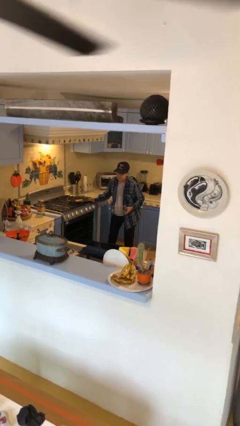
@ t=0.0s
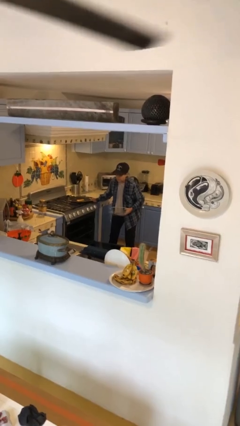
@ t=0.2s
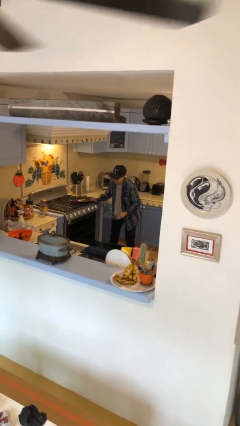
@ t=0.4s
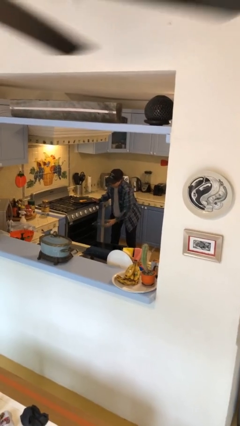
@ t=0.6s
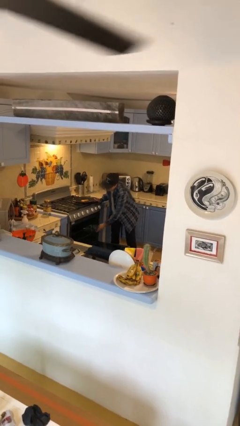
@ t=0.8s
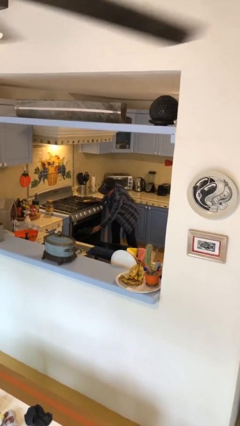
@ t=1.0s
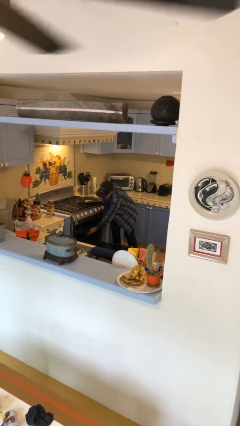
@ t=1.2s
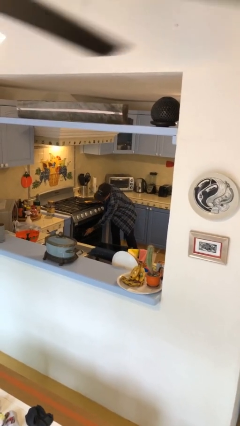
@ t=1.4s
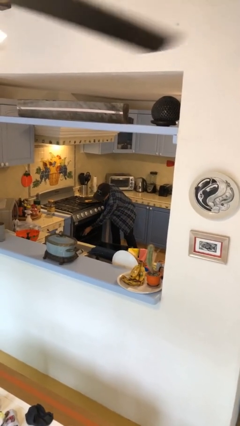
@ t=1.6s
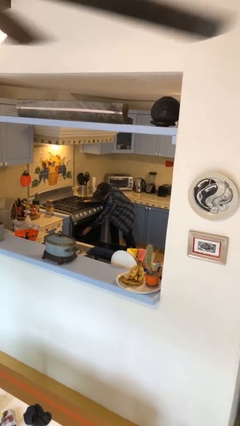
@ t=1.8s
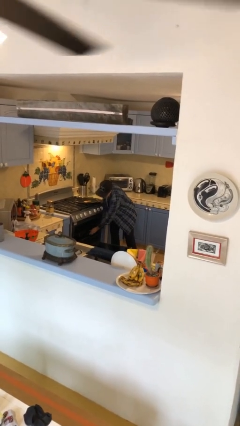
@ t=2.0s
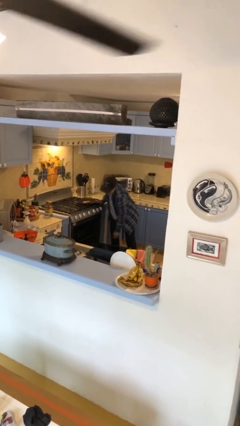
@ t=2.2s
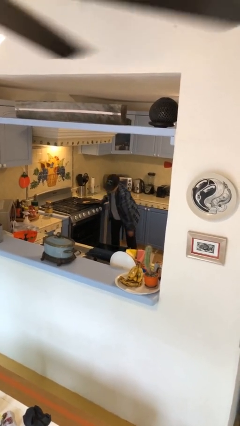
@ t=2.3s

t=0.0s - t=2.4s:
person puts object into oven

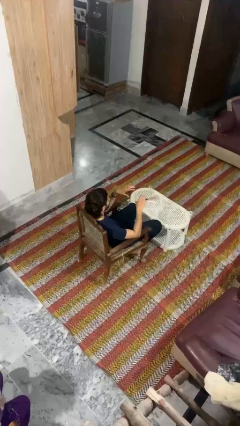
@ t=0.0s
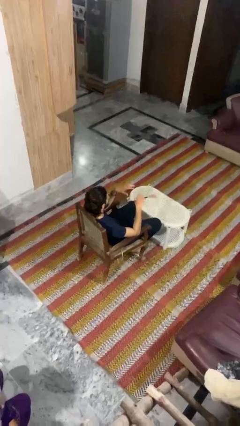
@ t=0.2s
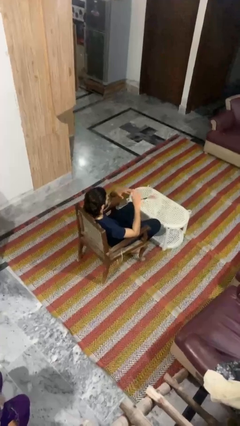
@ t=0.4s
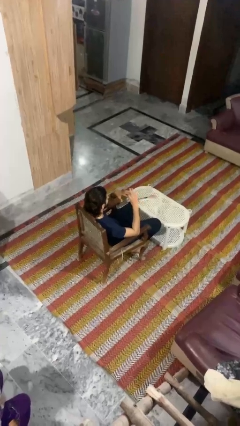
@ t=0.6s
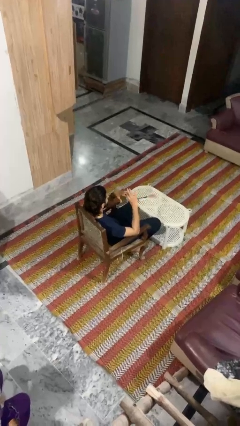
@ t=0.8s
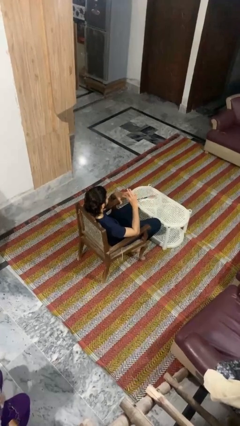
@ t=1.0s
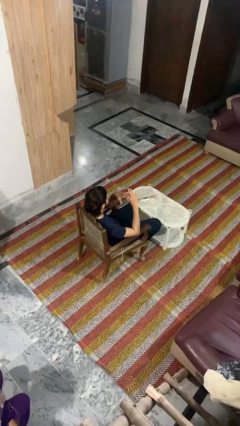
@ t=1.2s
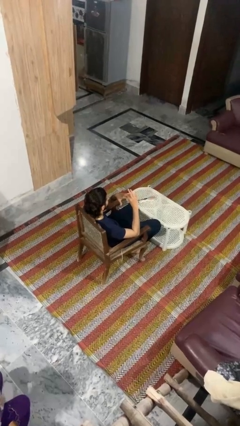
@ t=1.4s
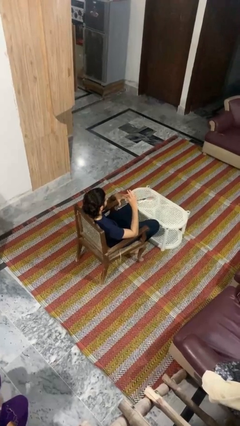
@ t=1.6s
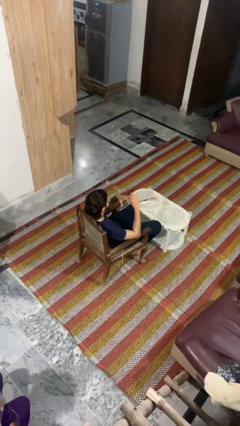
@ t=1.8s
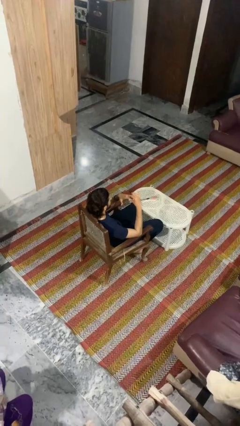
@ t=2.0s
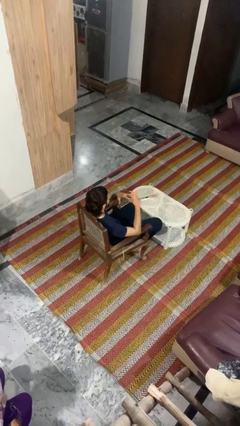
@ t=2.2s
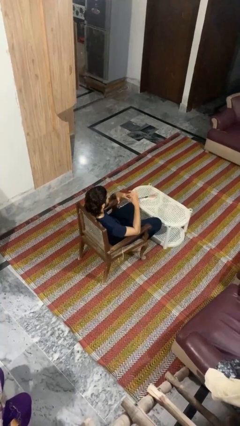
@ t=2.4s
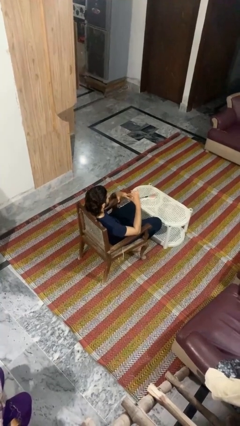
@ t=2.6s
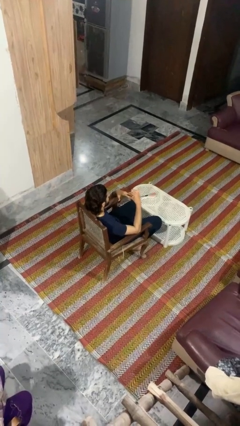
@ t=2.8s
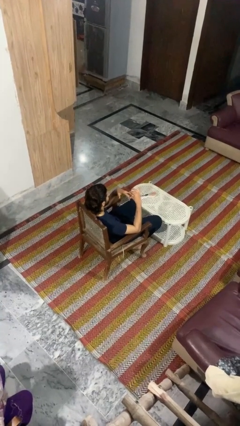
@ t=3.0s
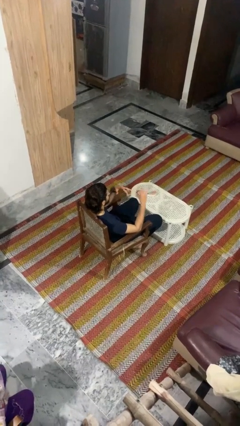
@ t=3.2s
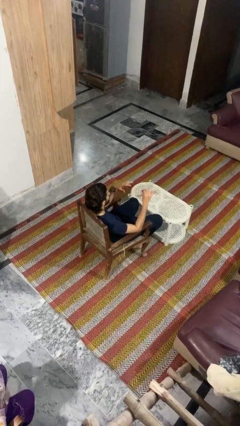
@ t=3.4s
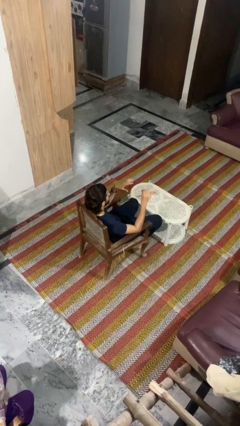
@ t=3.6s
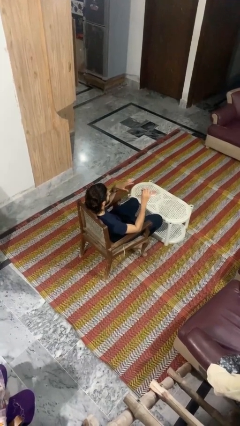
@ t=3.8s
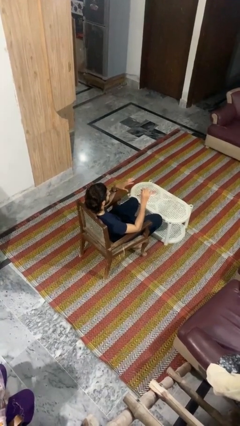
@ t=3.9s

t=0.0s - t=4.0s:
person takes off ring

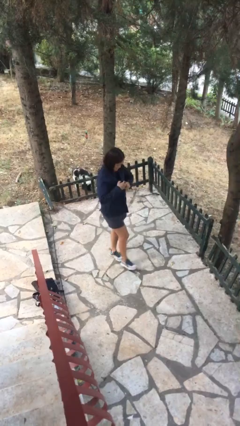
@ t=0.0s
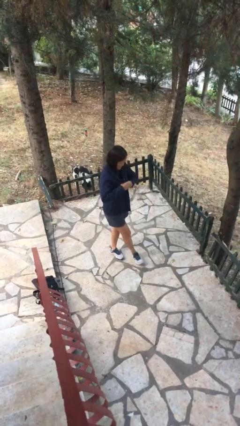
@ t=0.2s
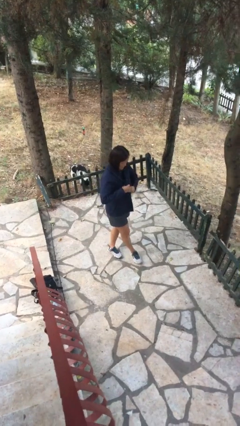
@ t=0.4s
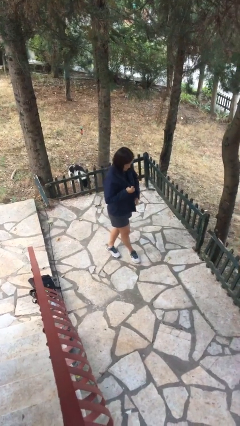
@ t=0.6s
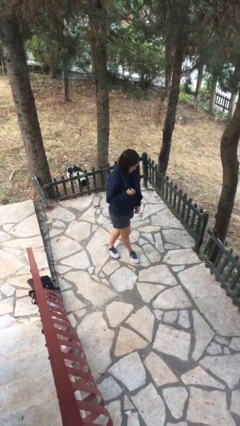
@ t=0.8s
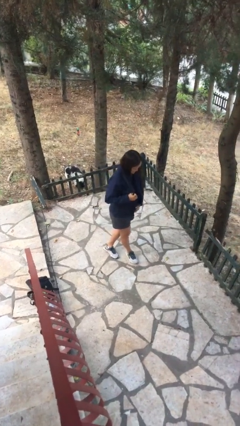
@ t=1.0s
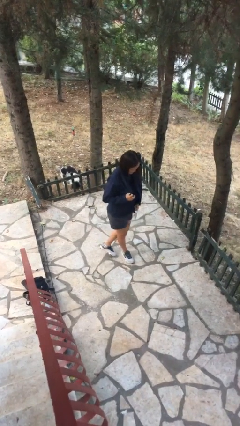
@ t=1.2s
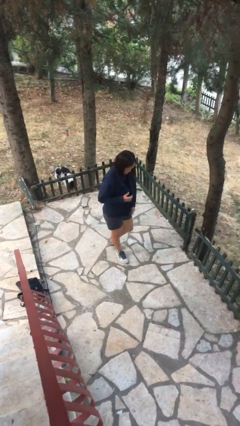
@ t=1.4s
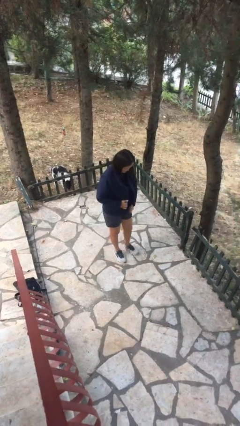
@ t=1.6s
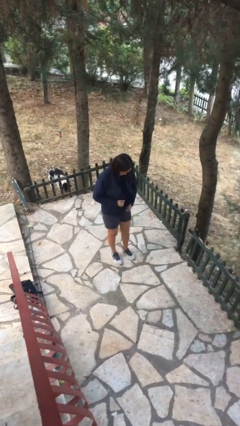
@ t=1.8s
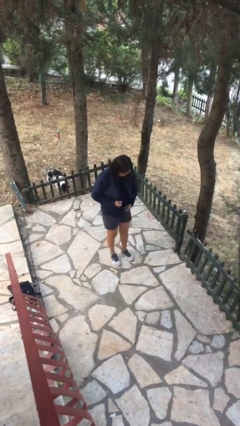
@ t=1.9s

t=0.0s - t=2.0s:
person unzips jacket

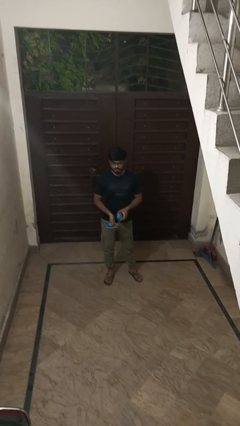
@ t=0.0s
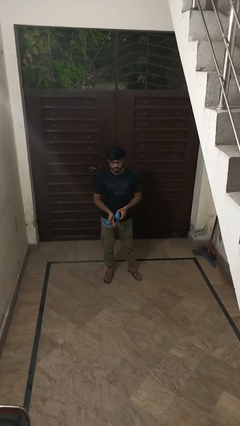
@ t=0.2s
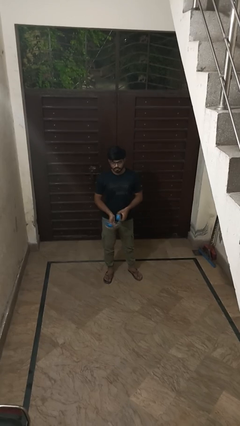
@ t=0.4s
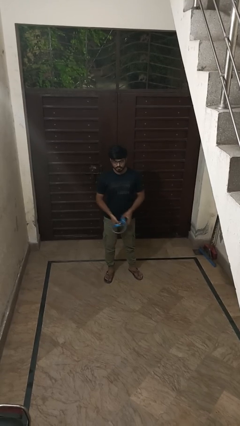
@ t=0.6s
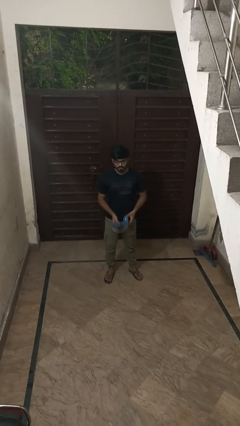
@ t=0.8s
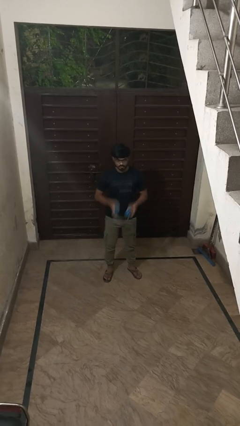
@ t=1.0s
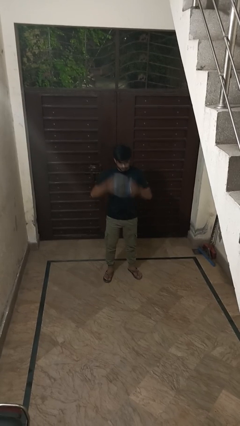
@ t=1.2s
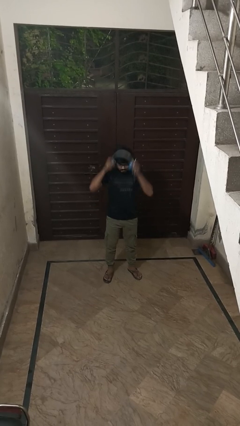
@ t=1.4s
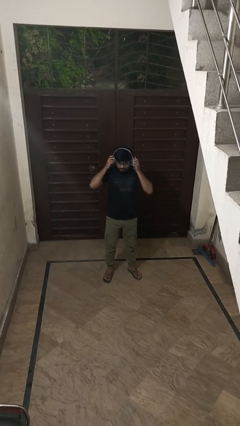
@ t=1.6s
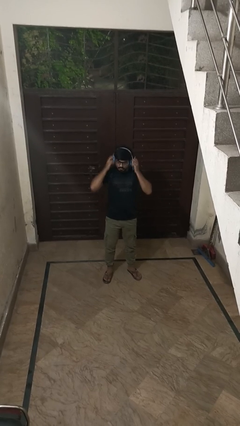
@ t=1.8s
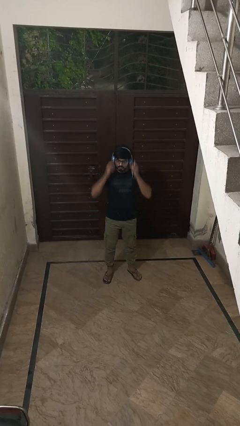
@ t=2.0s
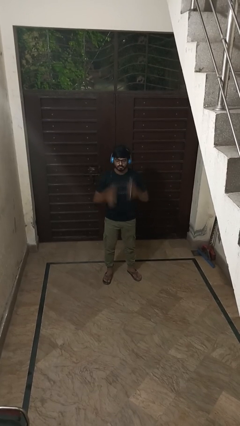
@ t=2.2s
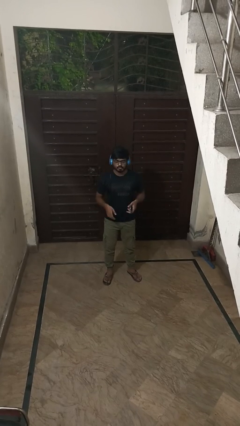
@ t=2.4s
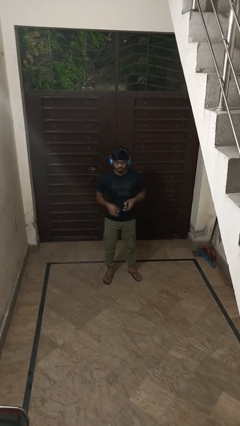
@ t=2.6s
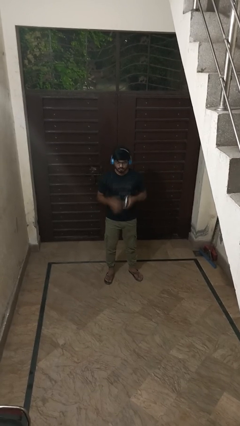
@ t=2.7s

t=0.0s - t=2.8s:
person puts on headphones

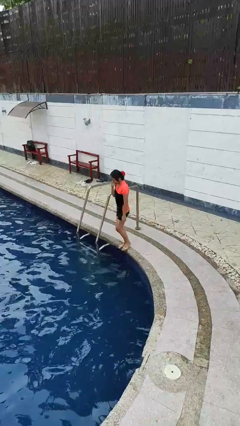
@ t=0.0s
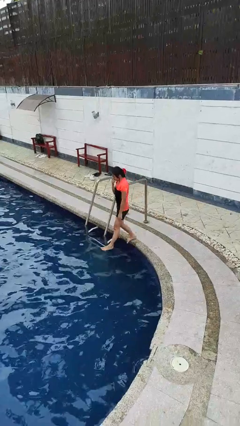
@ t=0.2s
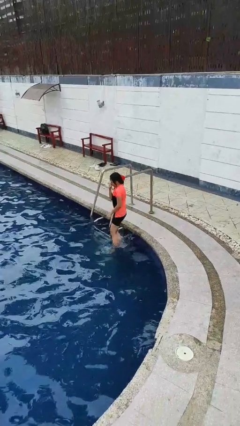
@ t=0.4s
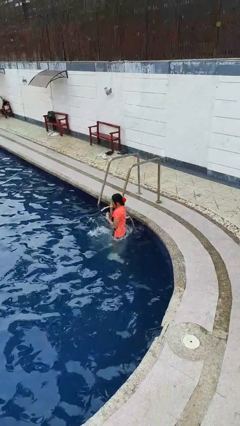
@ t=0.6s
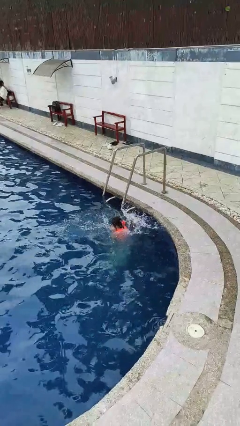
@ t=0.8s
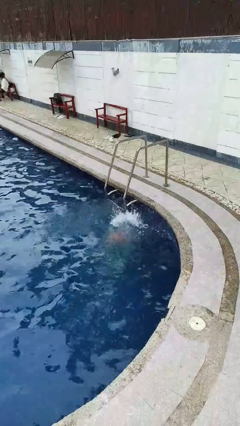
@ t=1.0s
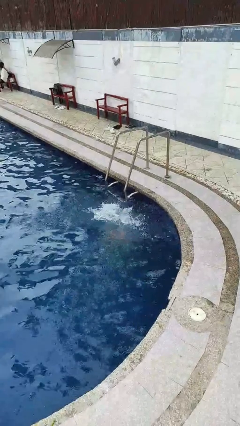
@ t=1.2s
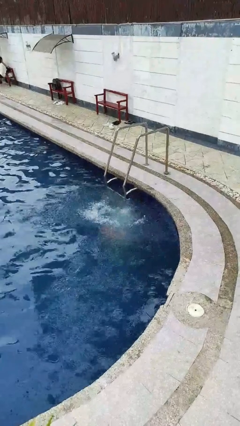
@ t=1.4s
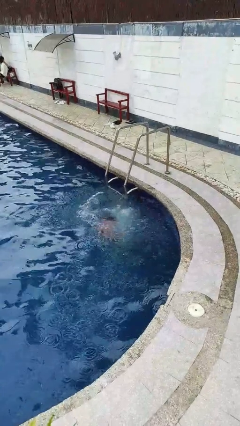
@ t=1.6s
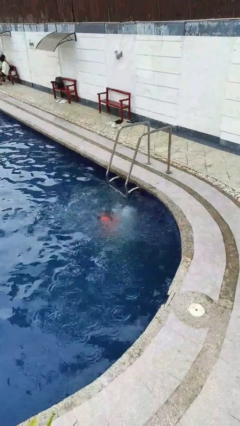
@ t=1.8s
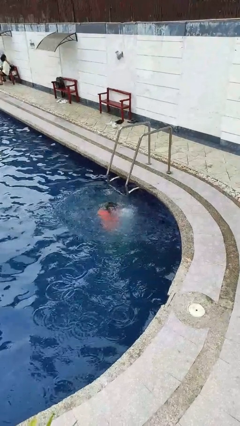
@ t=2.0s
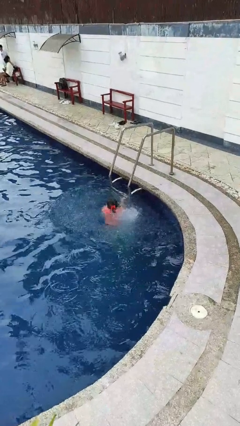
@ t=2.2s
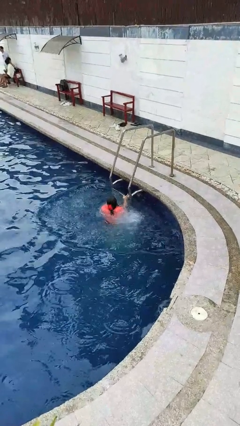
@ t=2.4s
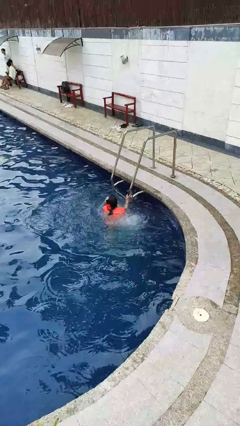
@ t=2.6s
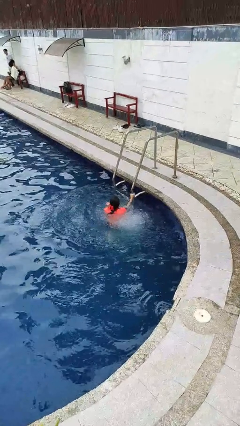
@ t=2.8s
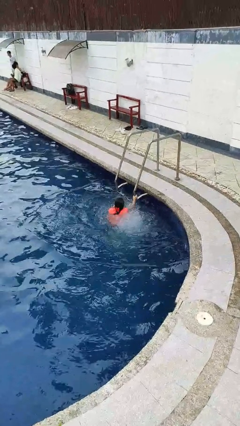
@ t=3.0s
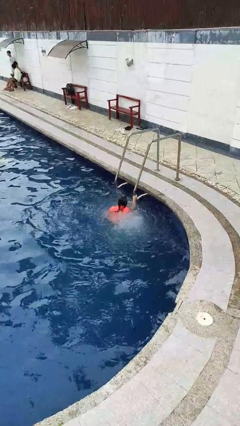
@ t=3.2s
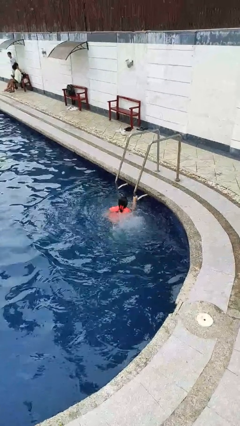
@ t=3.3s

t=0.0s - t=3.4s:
person jumps into pool

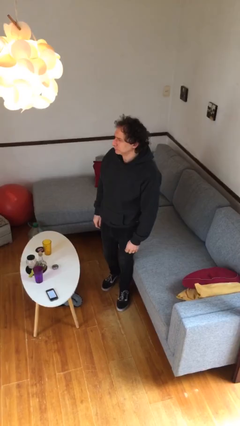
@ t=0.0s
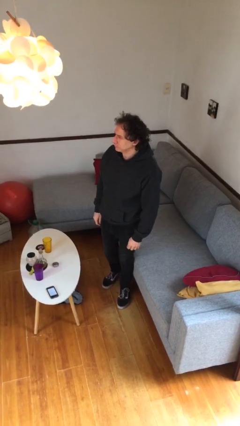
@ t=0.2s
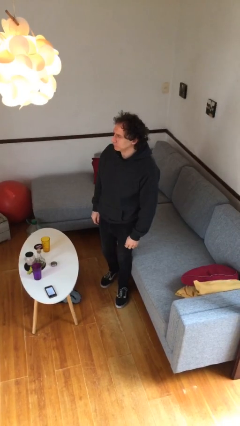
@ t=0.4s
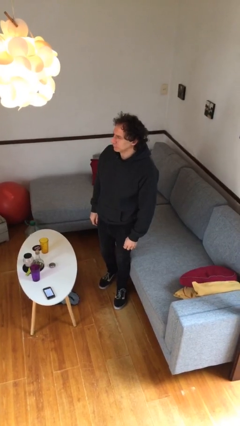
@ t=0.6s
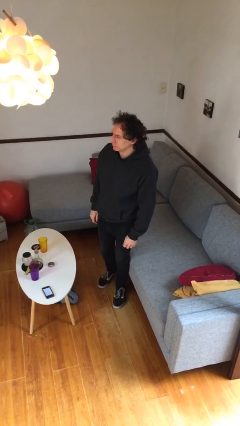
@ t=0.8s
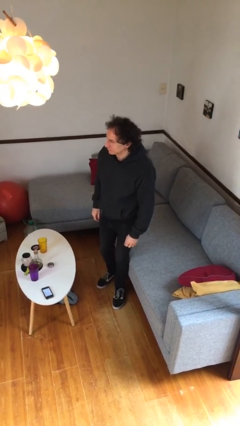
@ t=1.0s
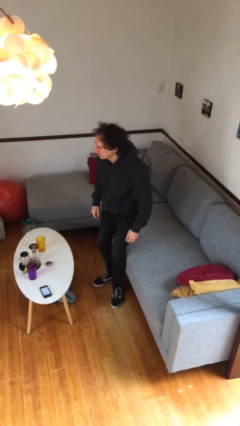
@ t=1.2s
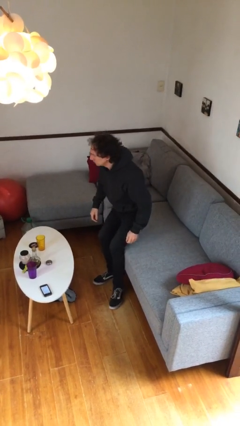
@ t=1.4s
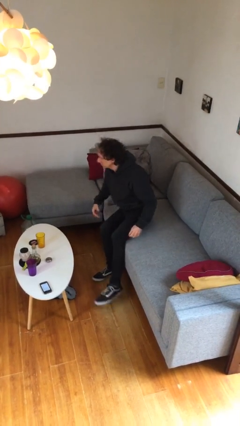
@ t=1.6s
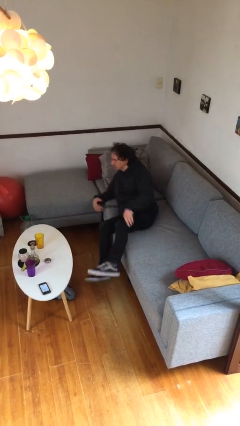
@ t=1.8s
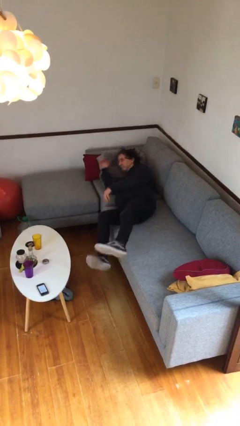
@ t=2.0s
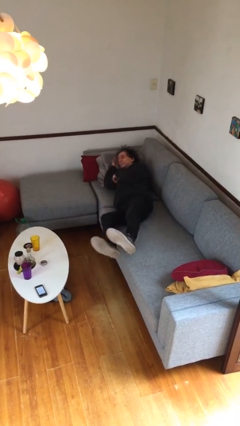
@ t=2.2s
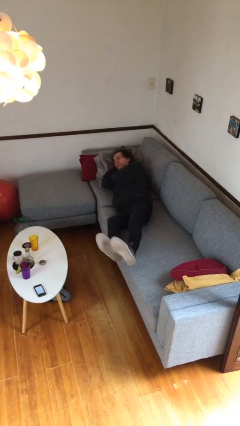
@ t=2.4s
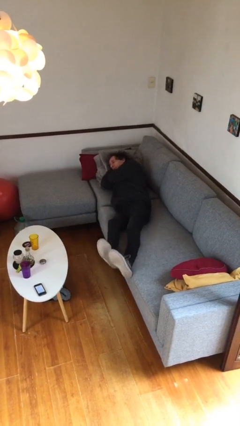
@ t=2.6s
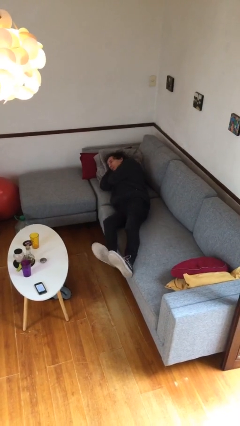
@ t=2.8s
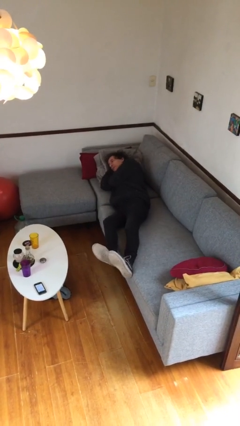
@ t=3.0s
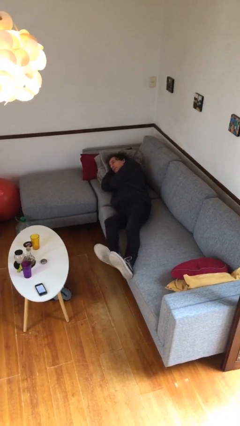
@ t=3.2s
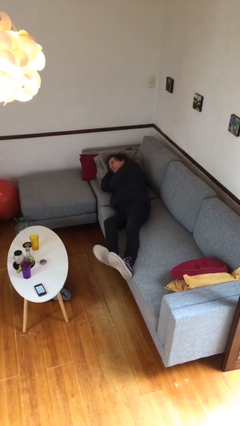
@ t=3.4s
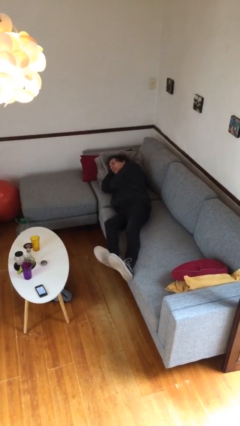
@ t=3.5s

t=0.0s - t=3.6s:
person lies down on couch
